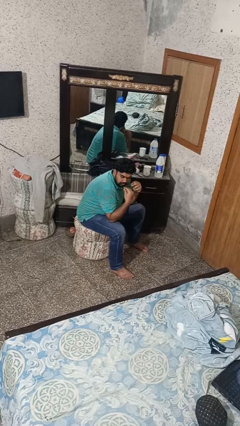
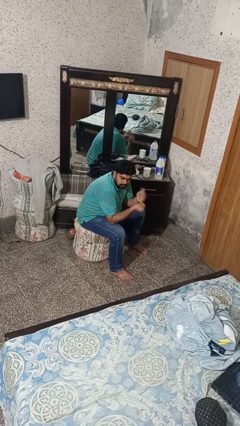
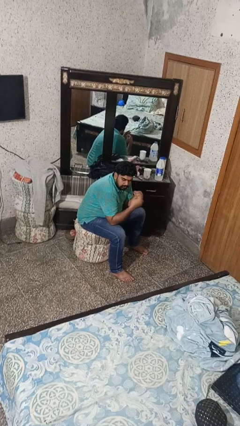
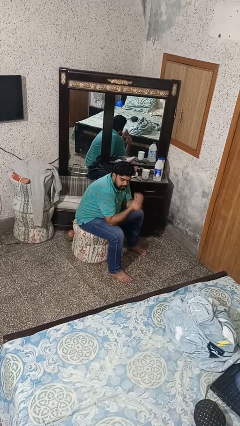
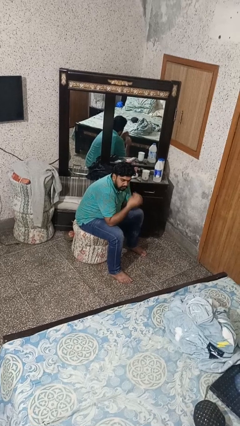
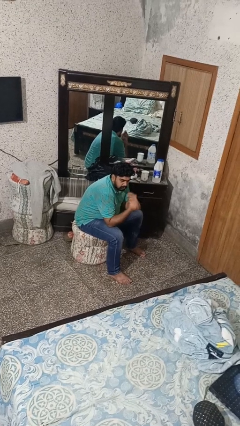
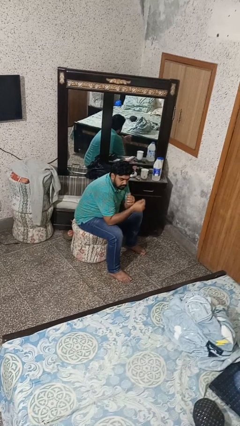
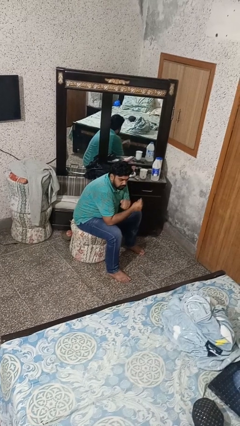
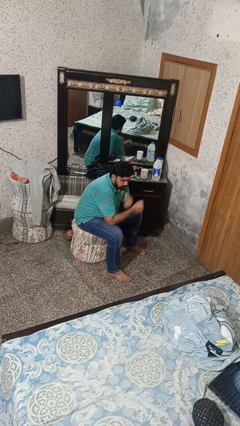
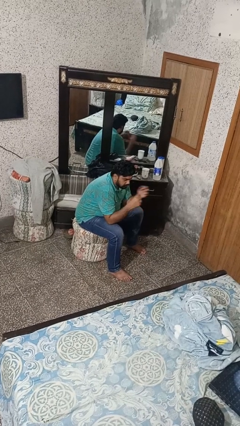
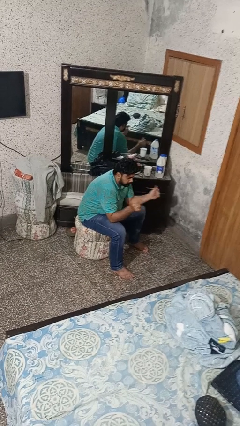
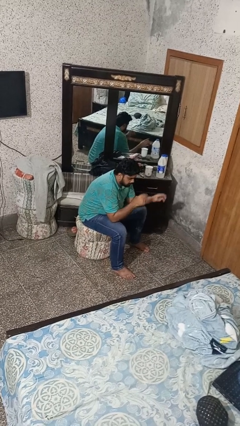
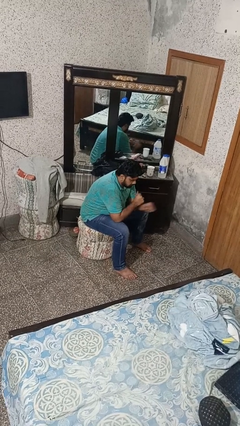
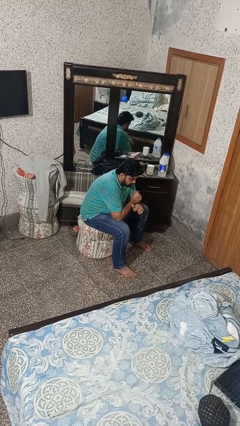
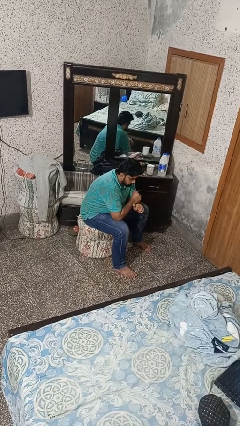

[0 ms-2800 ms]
person snaps fingers

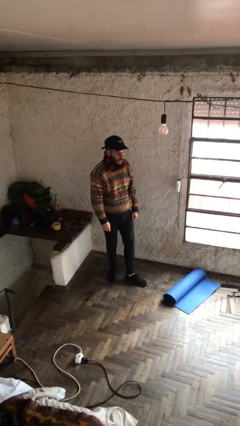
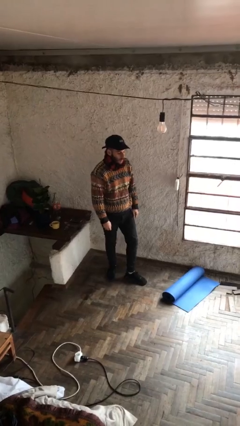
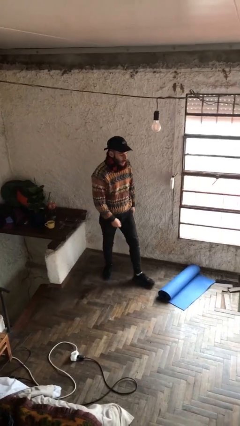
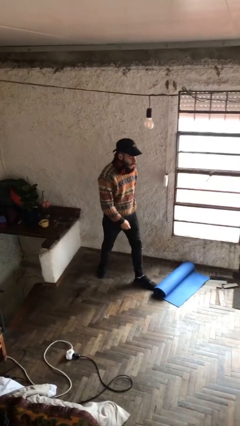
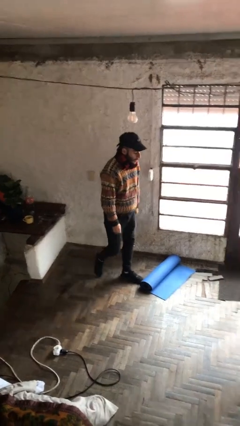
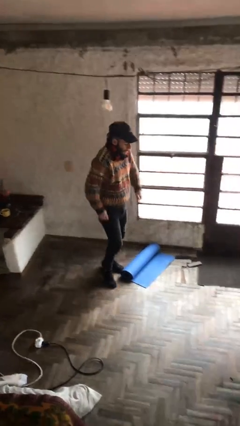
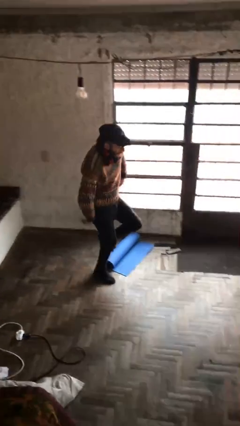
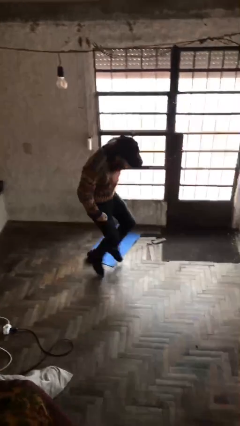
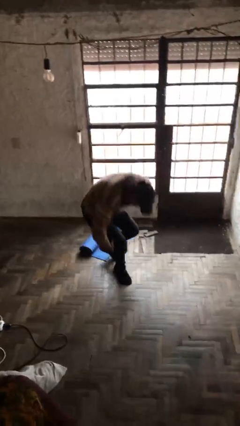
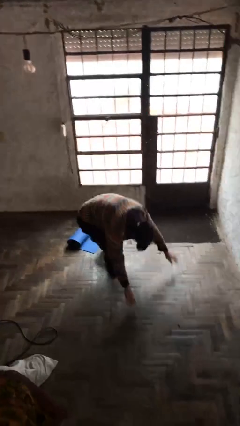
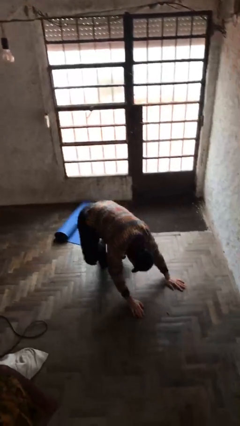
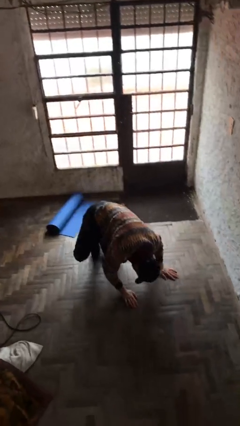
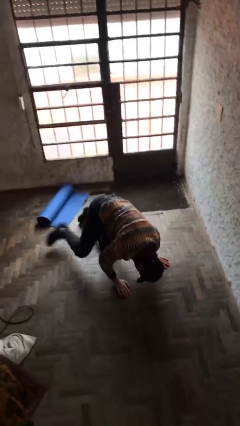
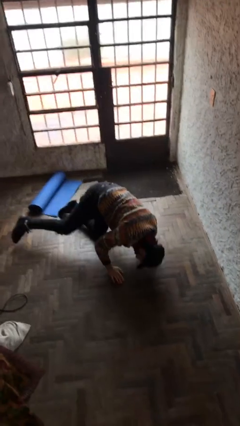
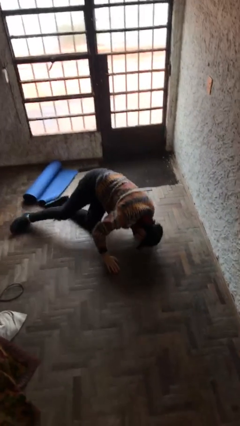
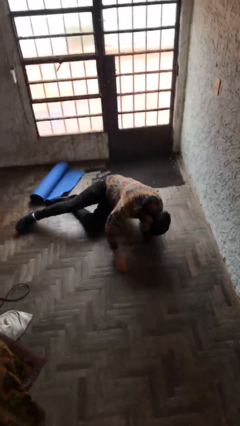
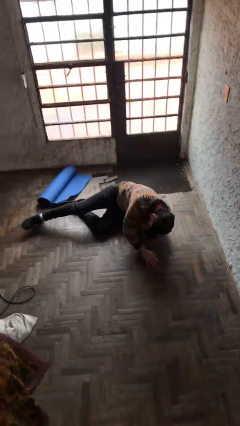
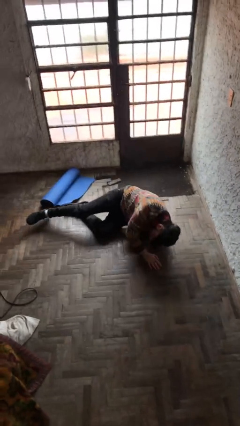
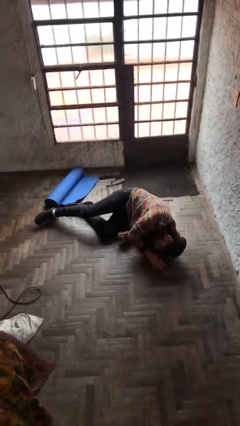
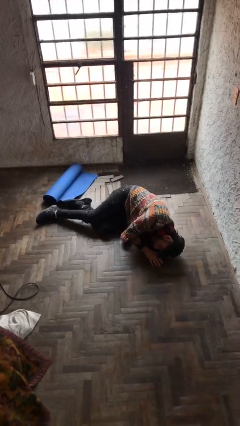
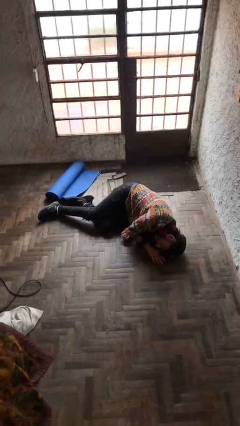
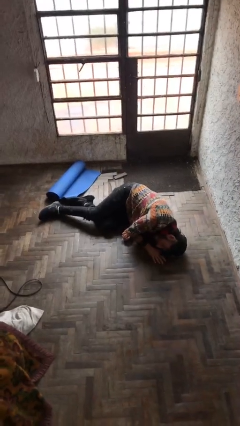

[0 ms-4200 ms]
person trips on object on floor

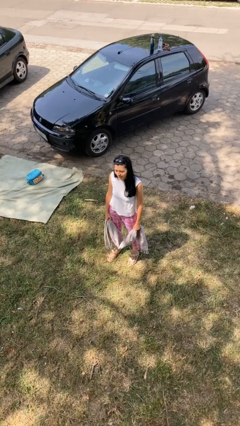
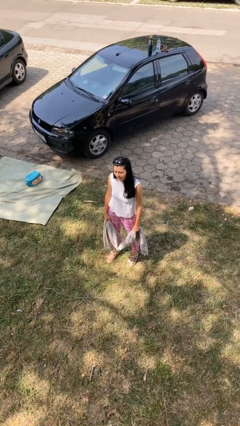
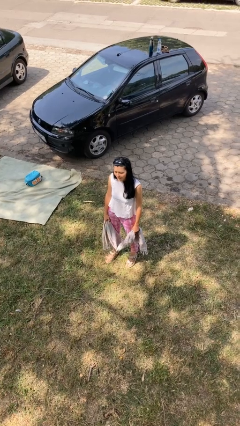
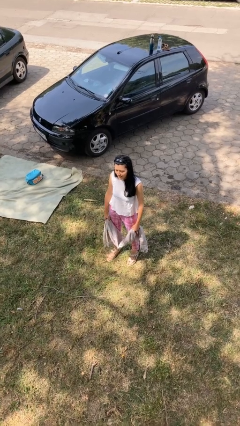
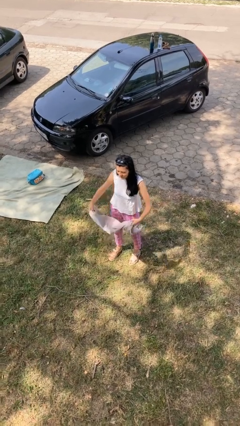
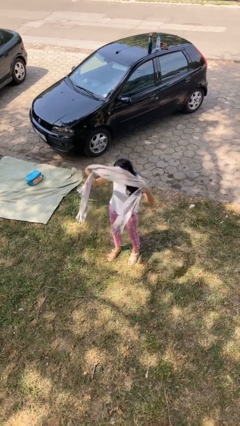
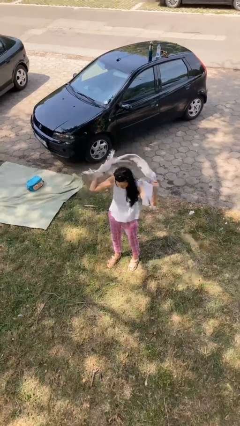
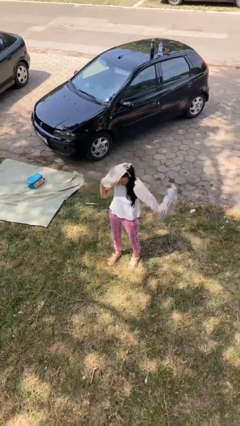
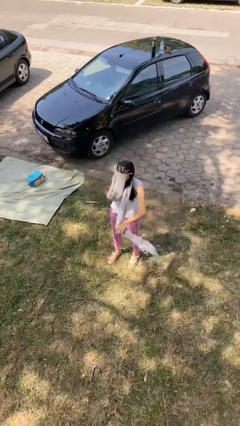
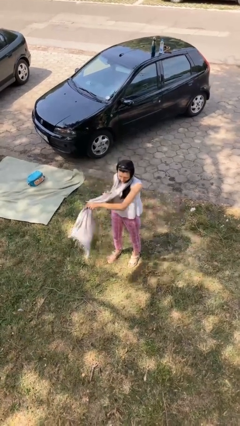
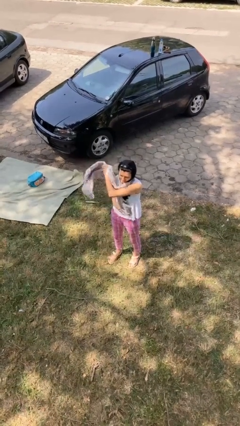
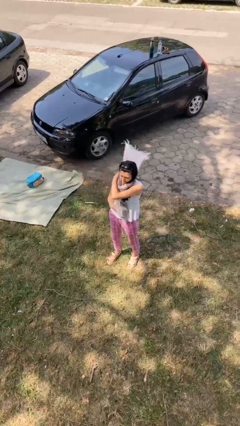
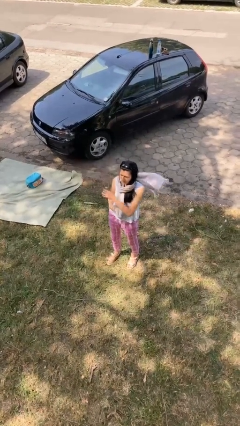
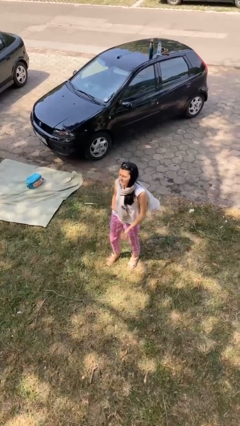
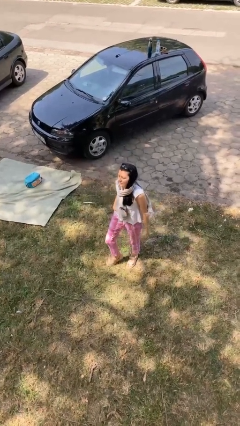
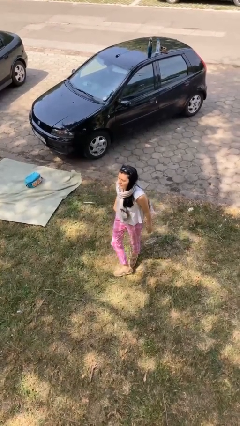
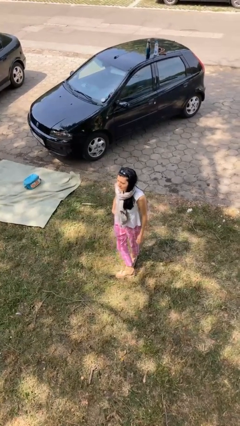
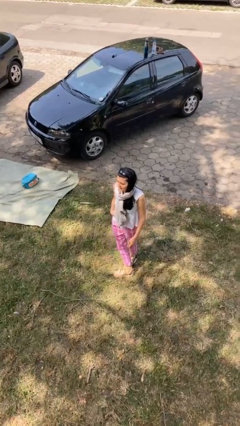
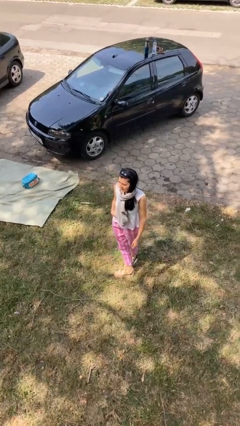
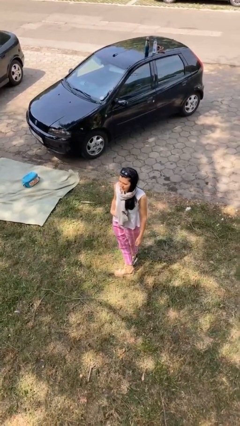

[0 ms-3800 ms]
person puts on scarf

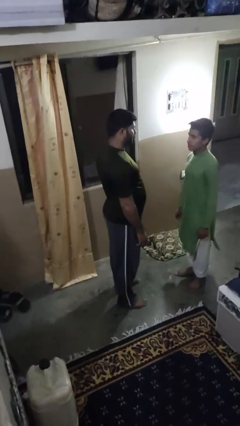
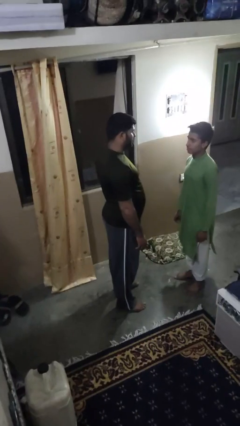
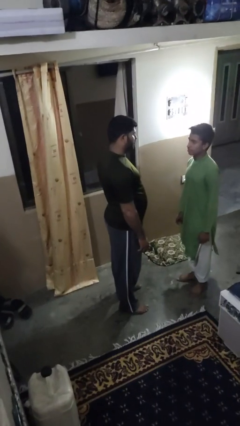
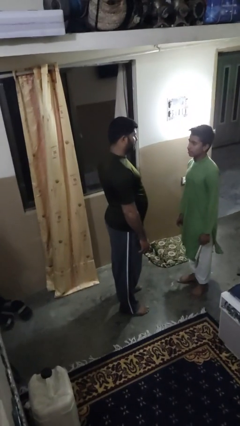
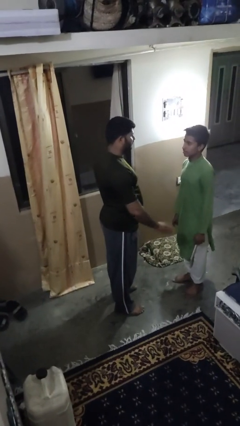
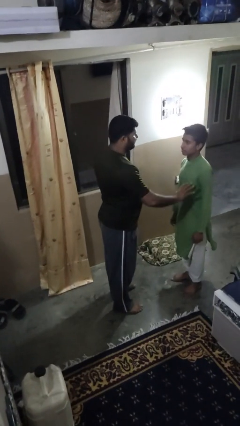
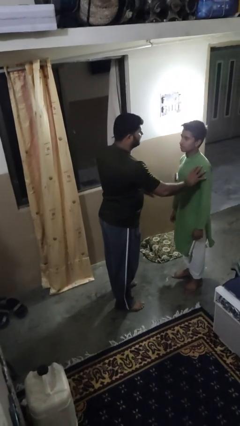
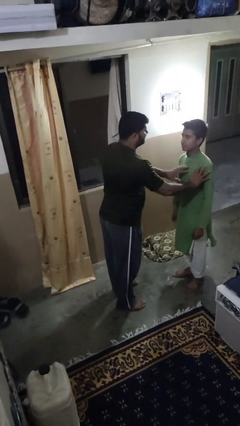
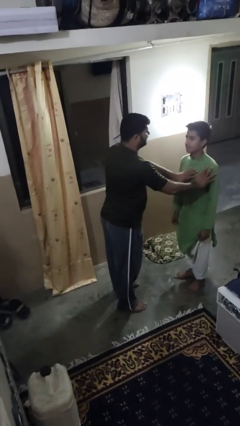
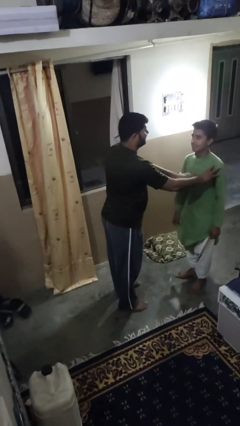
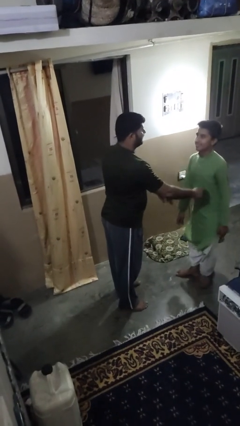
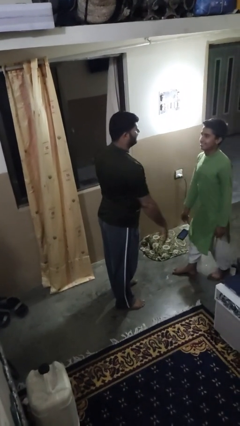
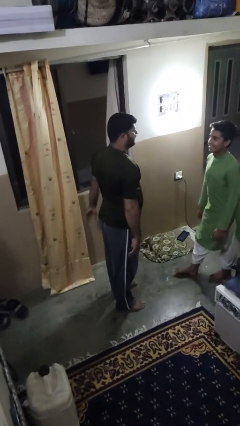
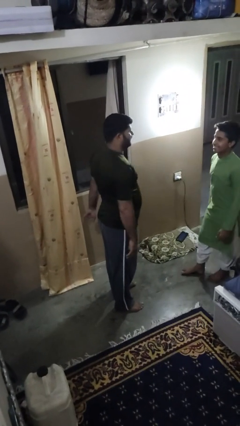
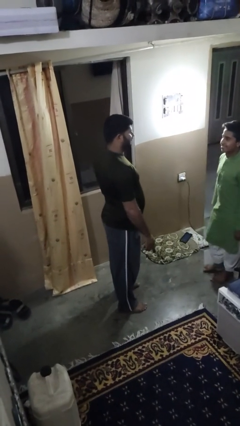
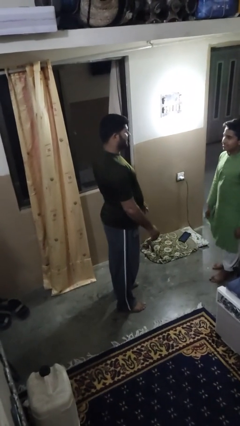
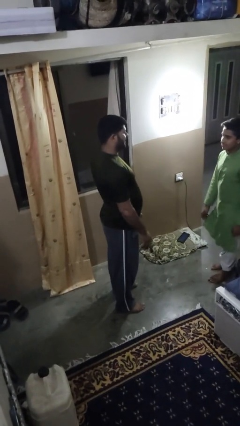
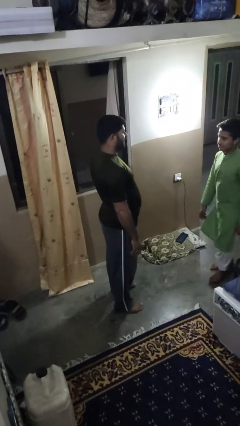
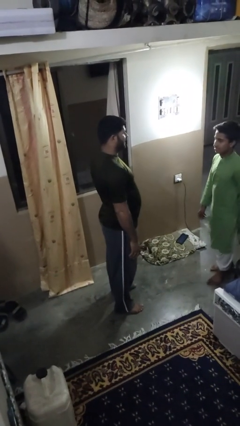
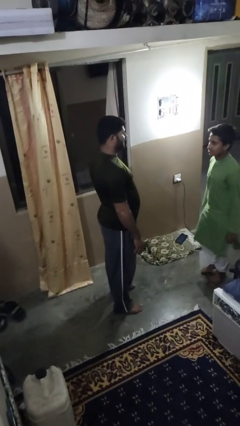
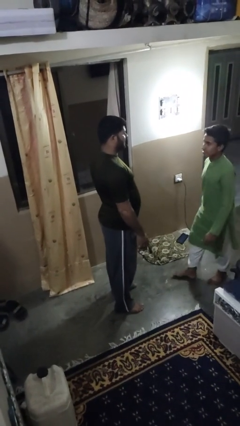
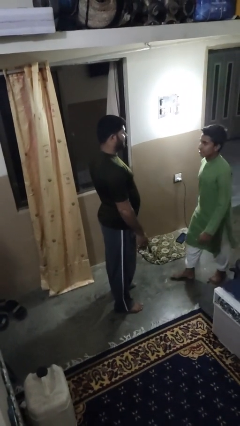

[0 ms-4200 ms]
person shoves person

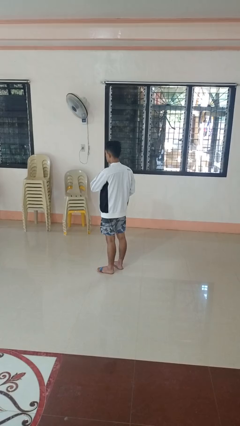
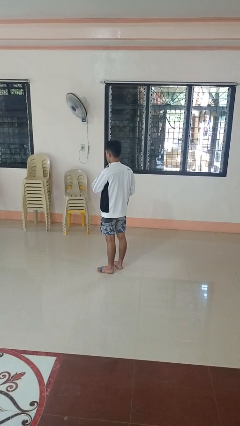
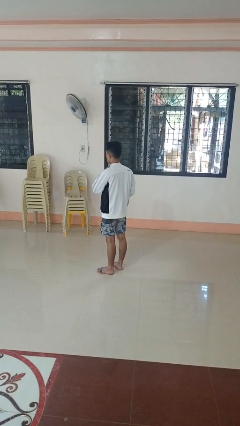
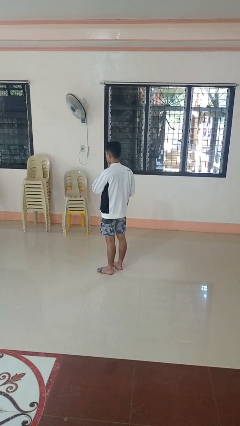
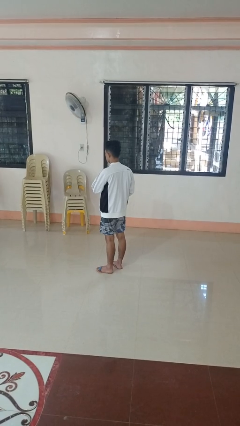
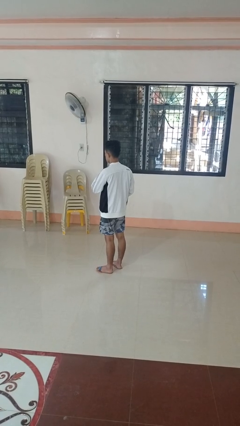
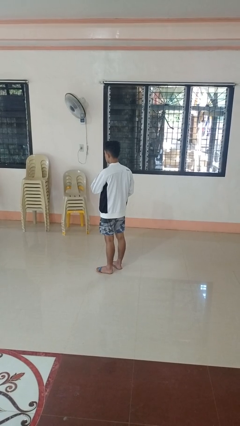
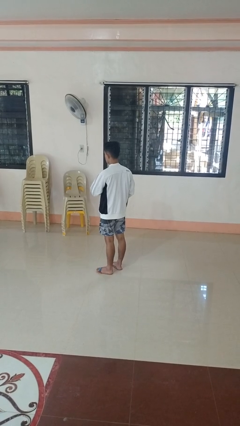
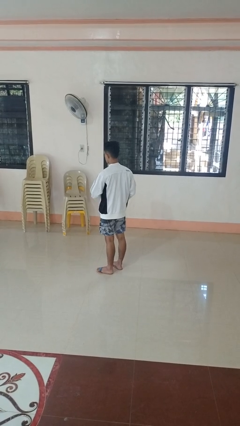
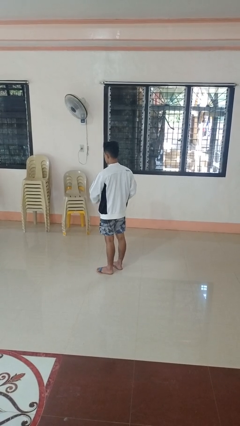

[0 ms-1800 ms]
person zips up jacket

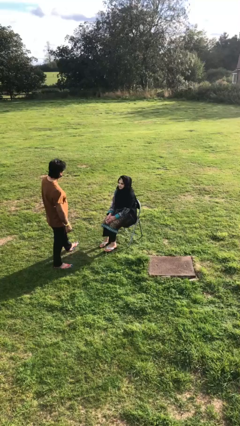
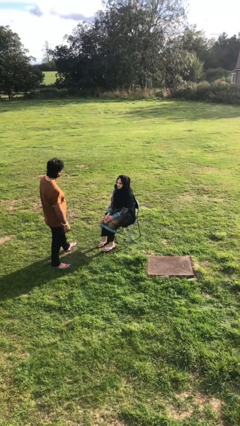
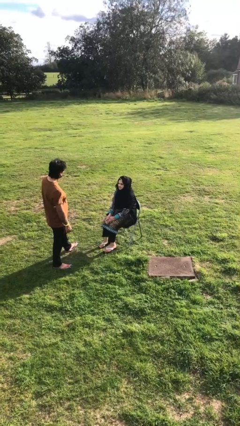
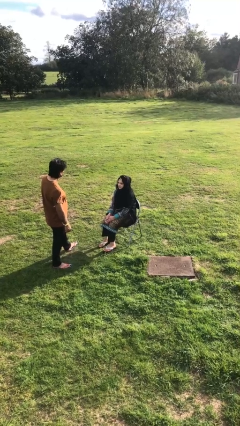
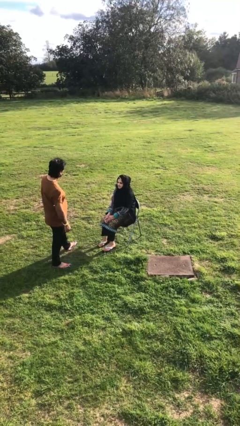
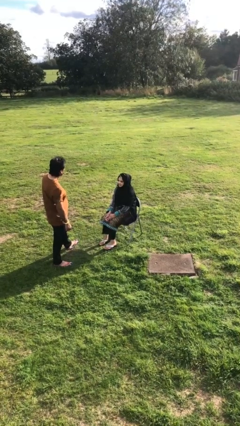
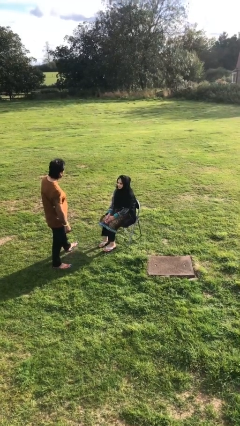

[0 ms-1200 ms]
person embraces person
